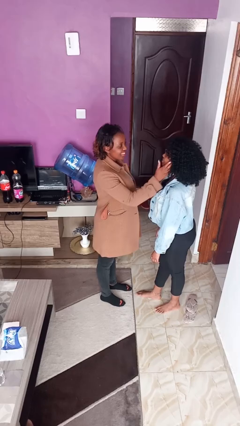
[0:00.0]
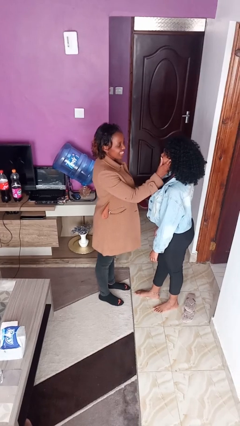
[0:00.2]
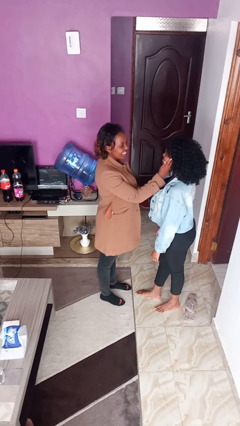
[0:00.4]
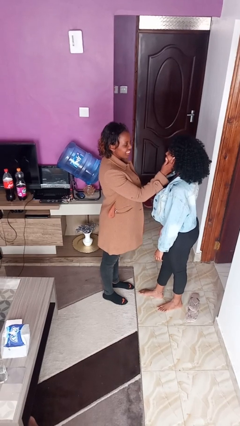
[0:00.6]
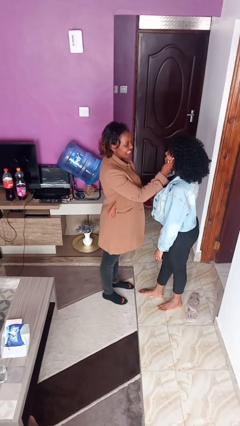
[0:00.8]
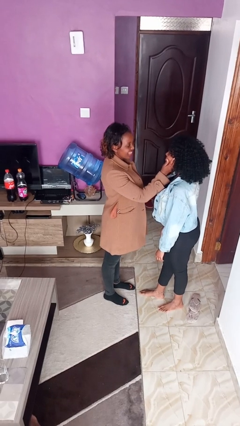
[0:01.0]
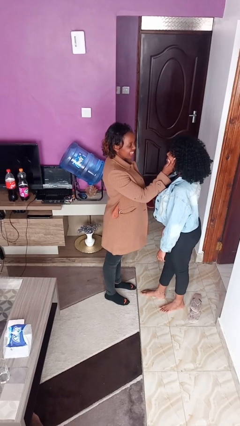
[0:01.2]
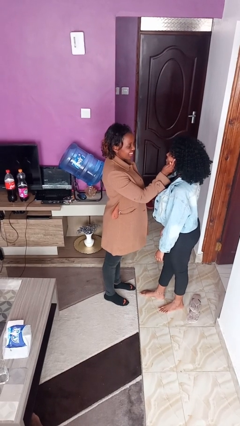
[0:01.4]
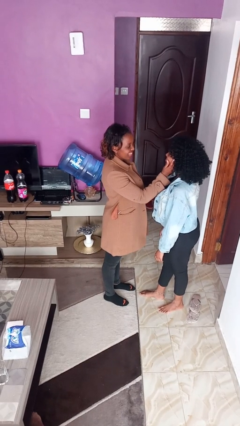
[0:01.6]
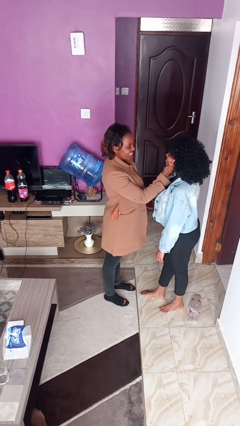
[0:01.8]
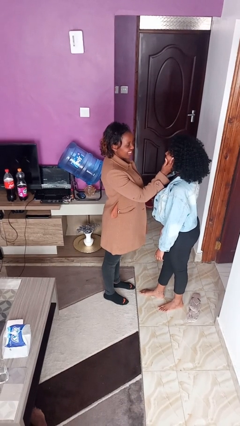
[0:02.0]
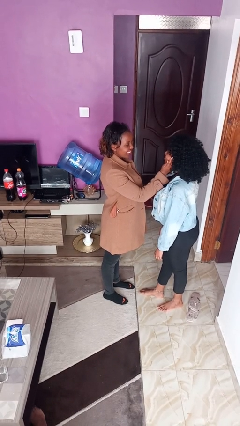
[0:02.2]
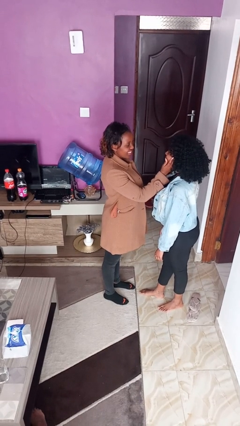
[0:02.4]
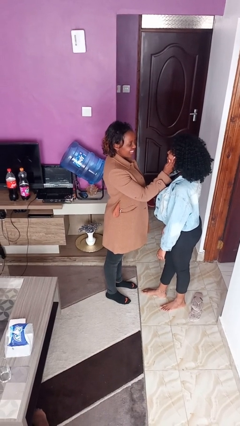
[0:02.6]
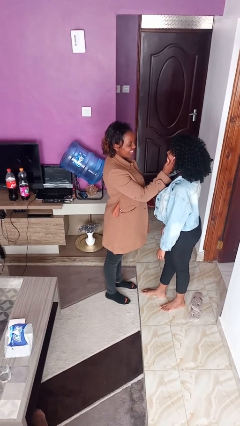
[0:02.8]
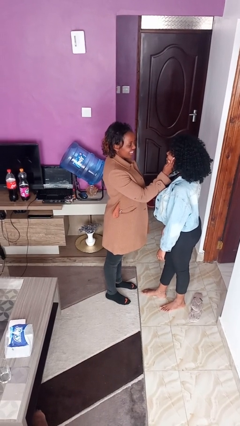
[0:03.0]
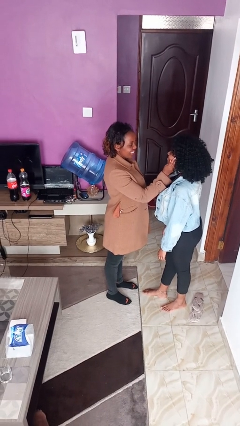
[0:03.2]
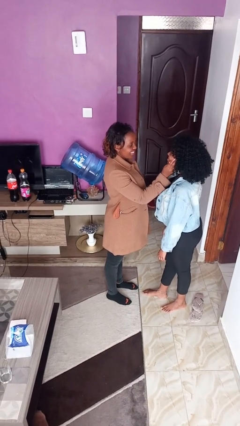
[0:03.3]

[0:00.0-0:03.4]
person touches face of person

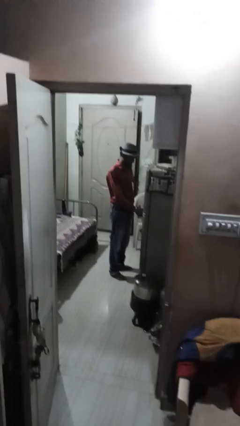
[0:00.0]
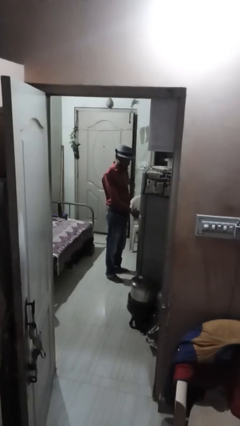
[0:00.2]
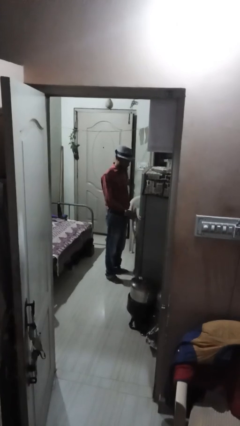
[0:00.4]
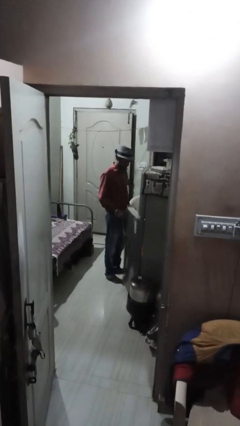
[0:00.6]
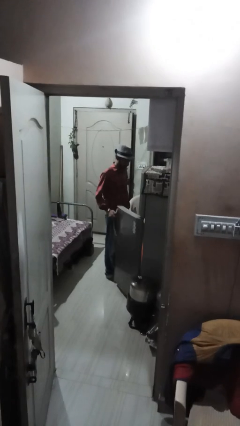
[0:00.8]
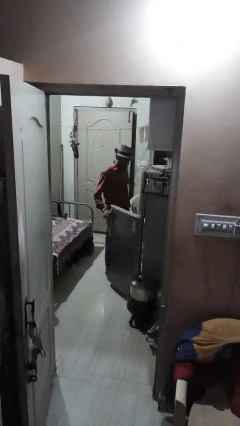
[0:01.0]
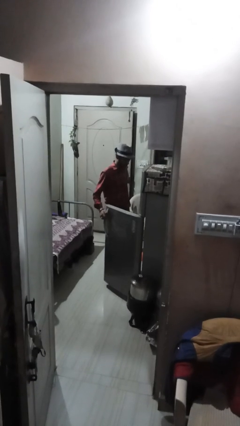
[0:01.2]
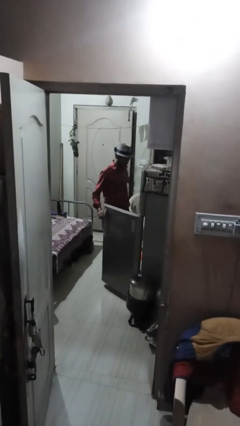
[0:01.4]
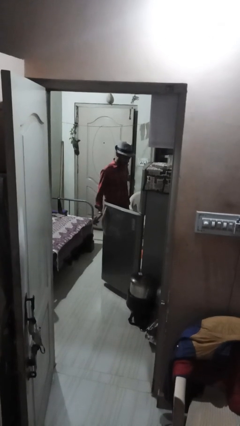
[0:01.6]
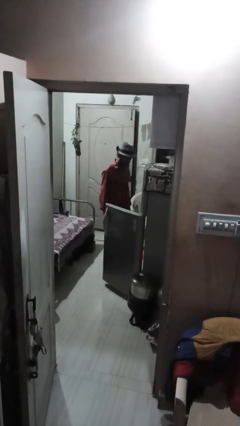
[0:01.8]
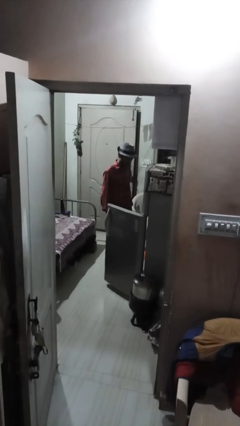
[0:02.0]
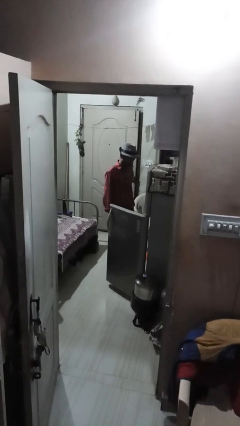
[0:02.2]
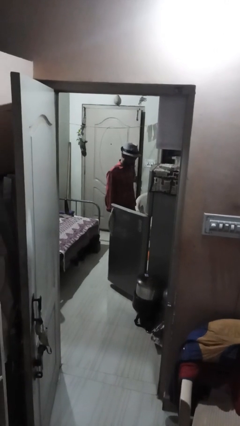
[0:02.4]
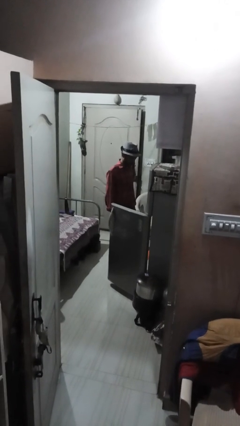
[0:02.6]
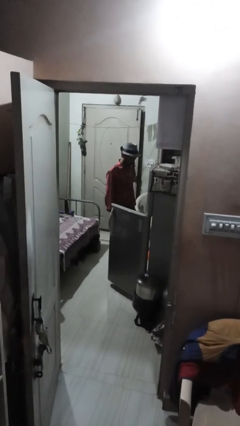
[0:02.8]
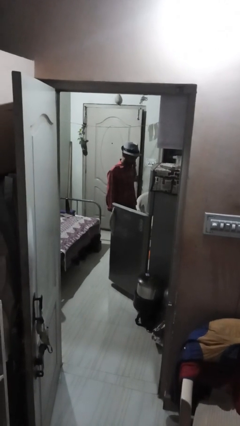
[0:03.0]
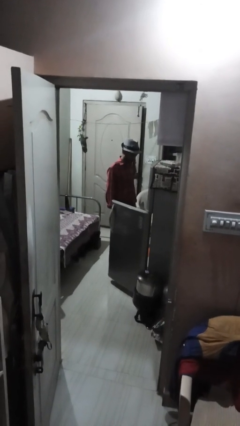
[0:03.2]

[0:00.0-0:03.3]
person opens refrigerator

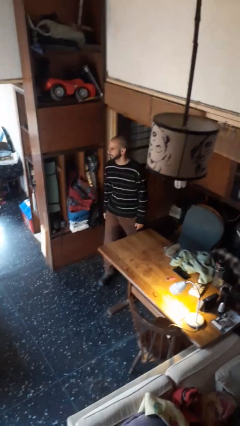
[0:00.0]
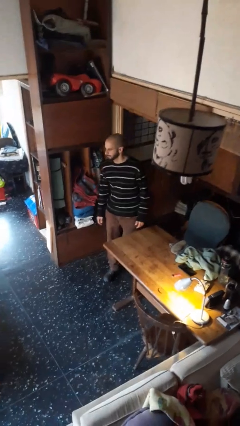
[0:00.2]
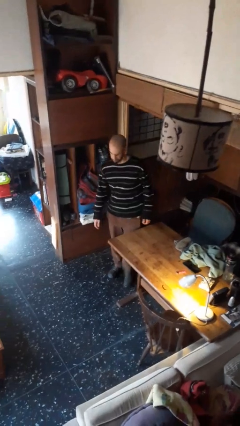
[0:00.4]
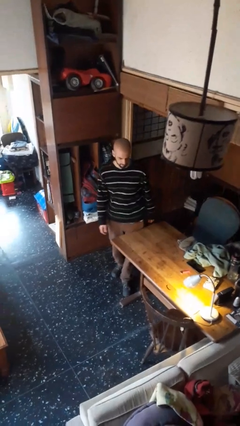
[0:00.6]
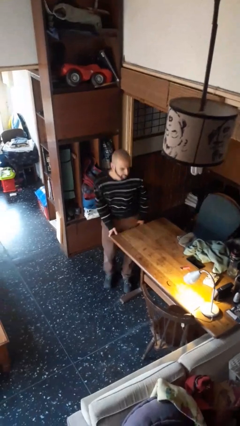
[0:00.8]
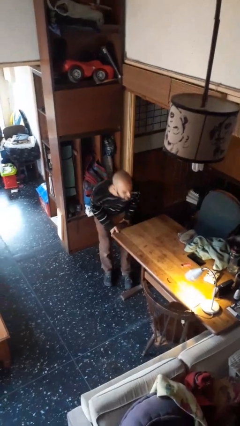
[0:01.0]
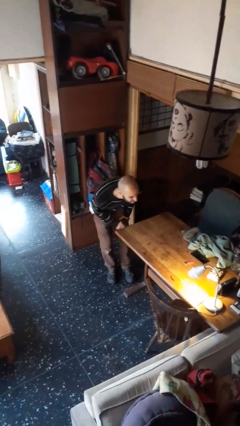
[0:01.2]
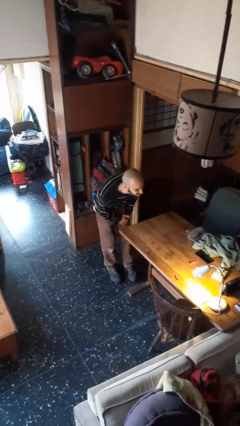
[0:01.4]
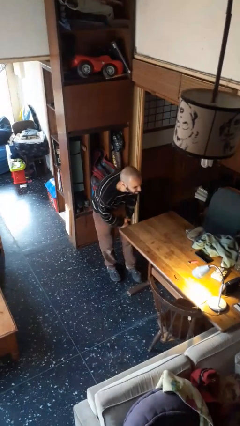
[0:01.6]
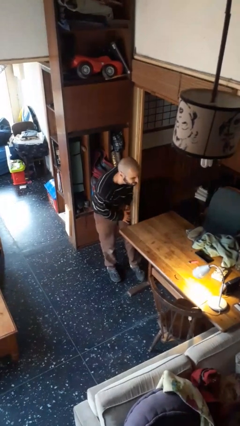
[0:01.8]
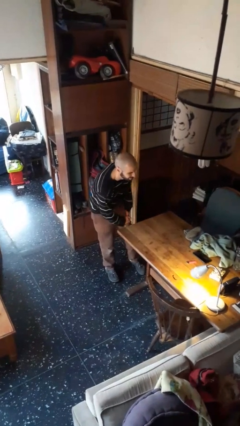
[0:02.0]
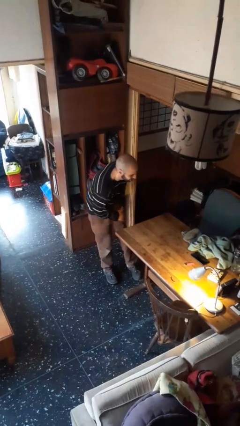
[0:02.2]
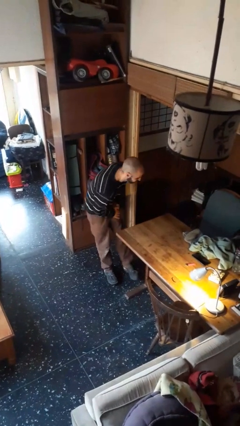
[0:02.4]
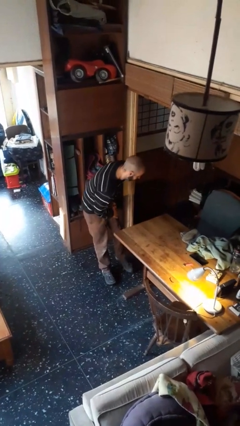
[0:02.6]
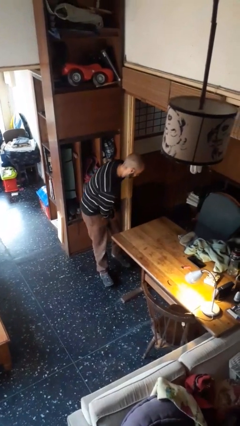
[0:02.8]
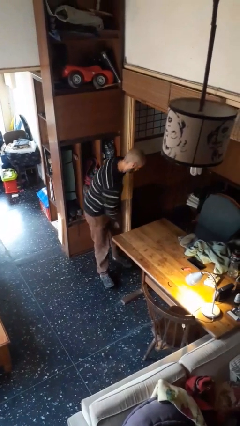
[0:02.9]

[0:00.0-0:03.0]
person bumps into table

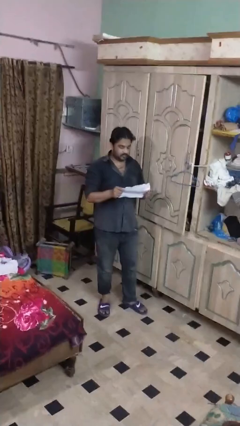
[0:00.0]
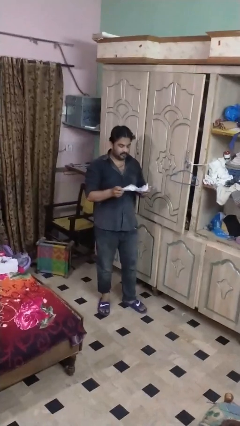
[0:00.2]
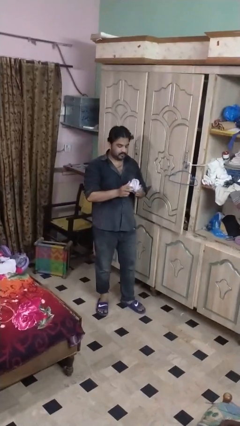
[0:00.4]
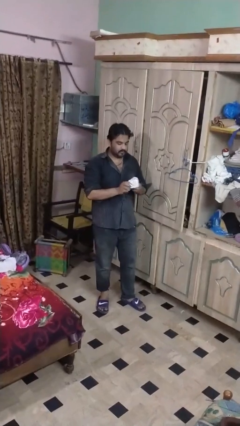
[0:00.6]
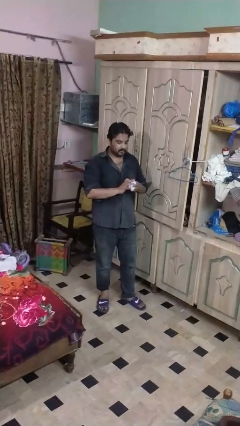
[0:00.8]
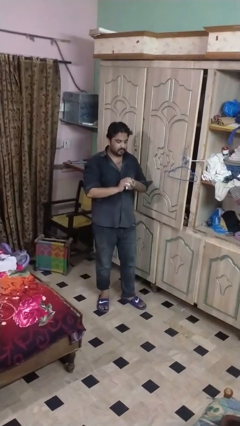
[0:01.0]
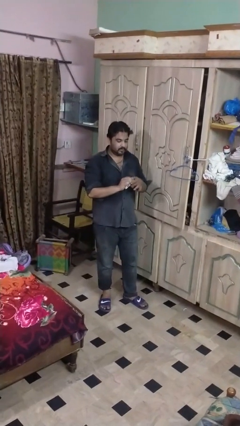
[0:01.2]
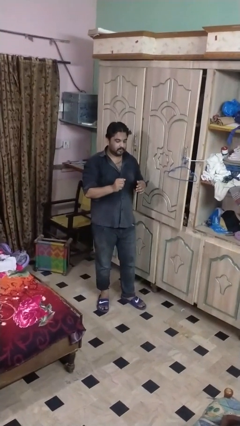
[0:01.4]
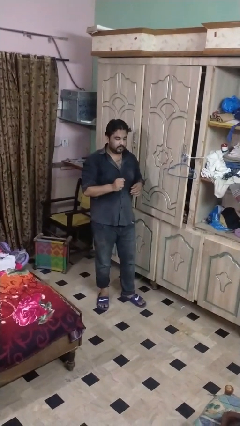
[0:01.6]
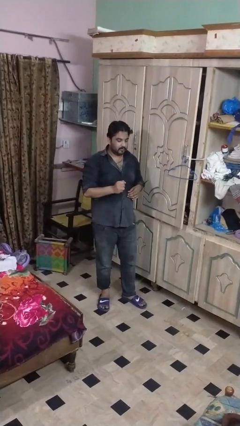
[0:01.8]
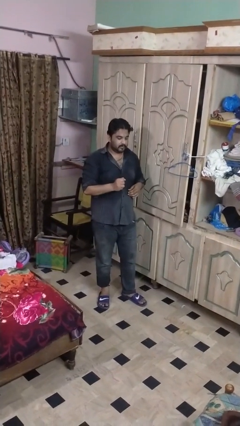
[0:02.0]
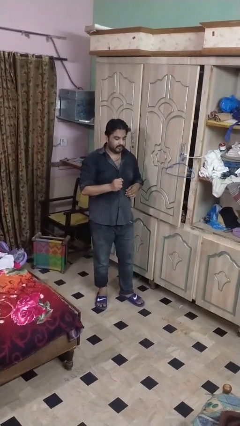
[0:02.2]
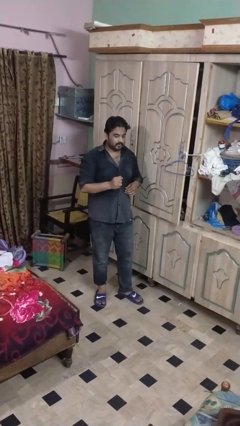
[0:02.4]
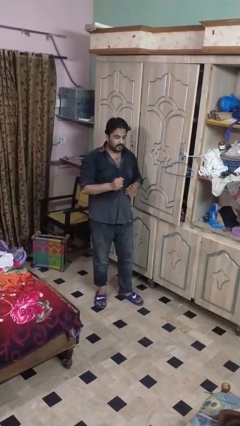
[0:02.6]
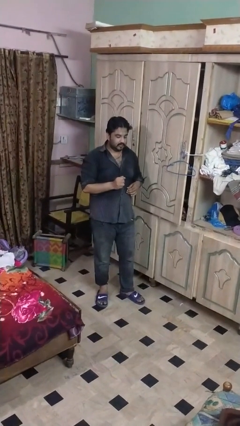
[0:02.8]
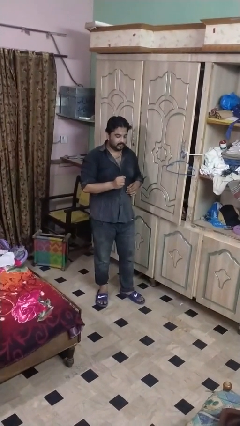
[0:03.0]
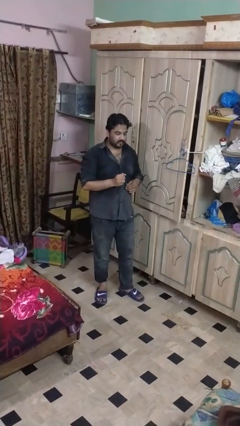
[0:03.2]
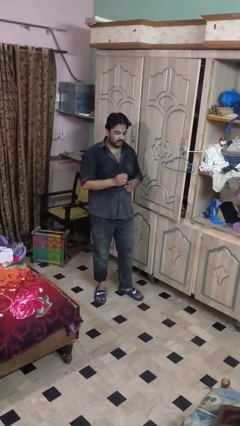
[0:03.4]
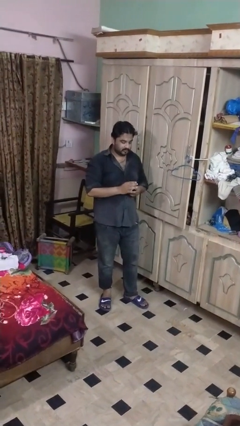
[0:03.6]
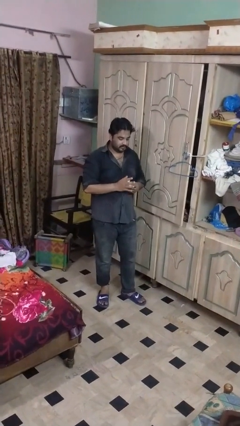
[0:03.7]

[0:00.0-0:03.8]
person crumples paper

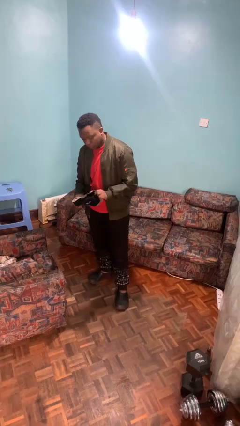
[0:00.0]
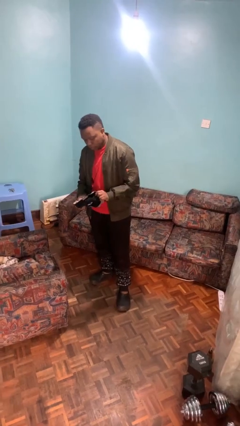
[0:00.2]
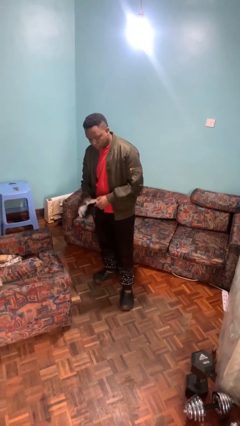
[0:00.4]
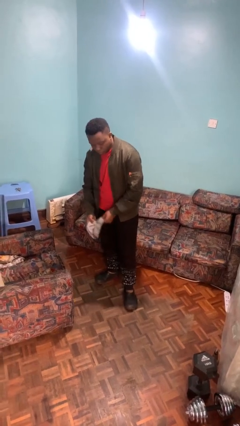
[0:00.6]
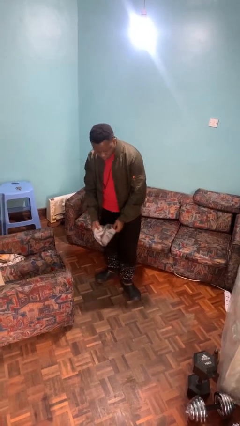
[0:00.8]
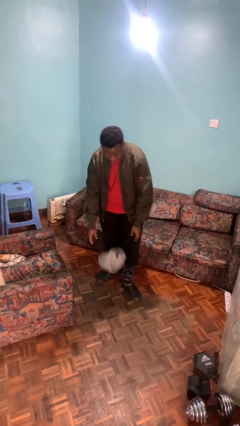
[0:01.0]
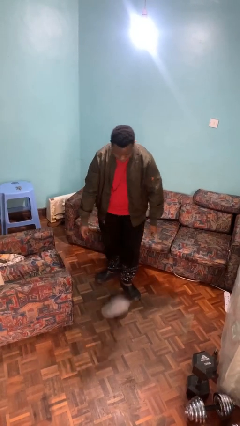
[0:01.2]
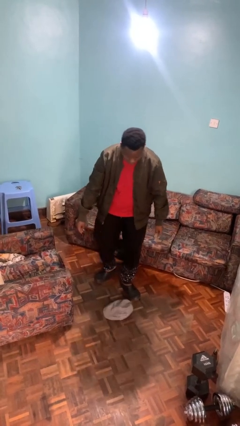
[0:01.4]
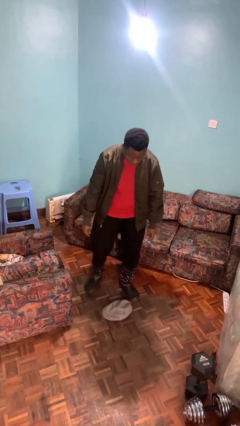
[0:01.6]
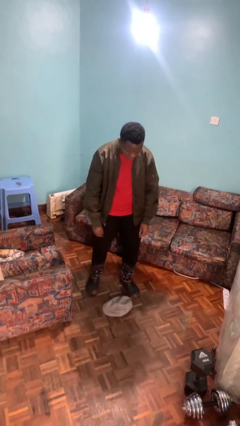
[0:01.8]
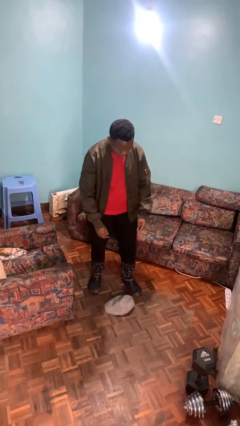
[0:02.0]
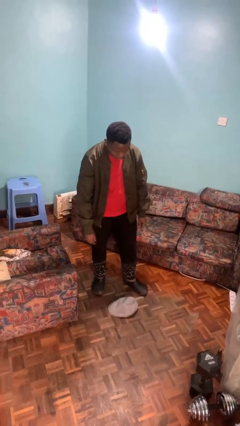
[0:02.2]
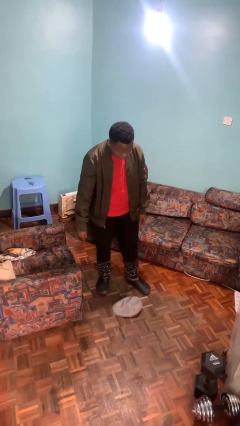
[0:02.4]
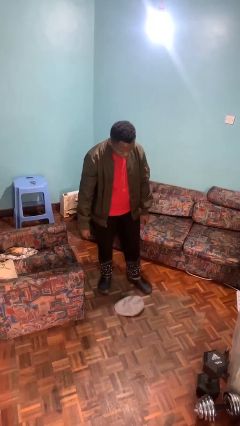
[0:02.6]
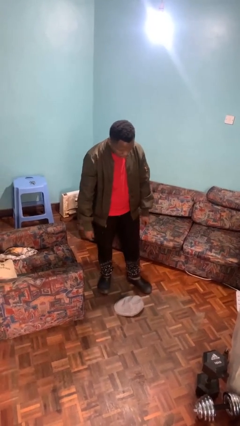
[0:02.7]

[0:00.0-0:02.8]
person drops object

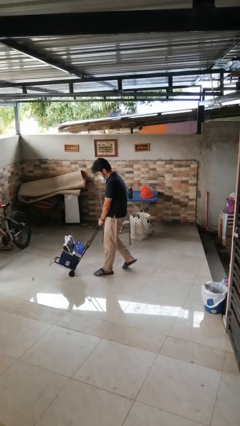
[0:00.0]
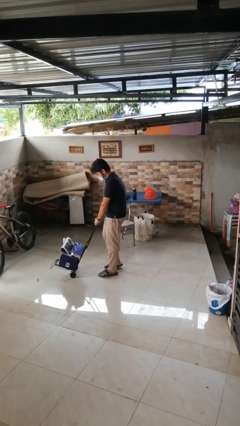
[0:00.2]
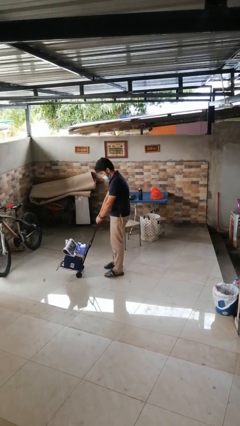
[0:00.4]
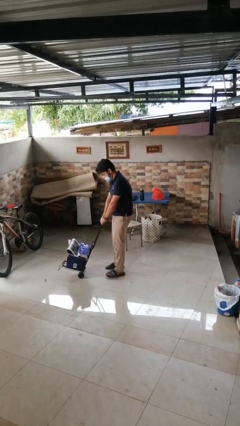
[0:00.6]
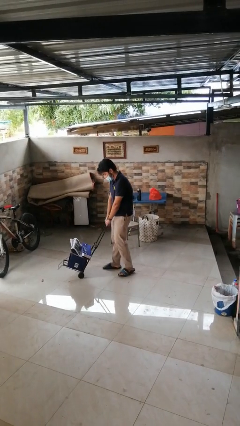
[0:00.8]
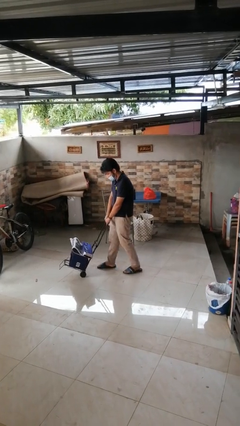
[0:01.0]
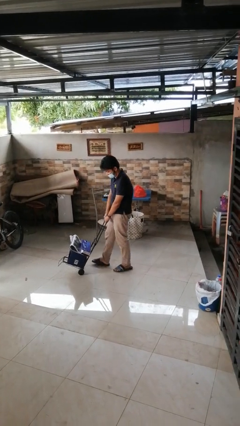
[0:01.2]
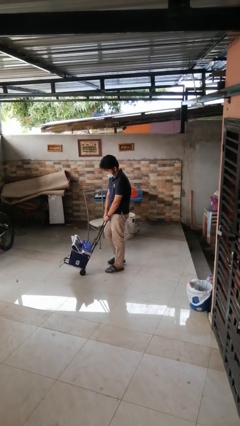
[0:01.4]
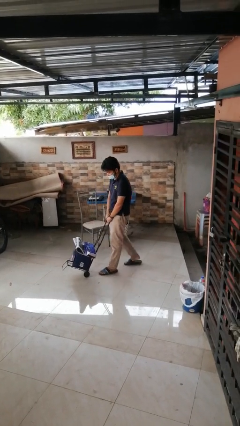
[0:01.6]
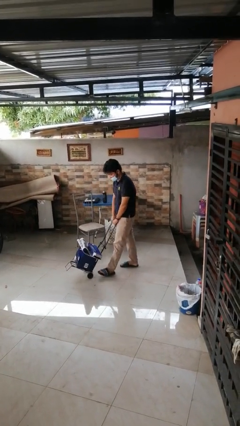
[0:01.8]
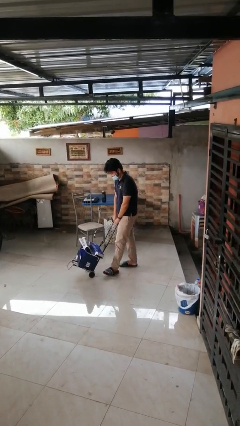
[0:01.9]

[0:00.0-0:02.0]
person pulls wheeled cart
